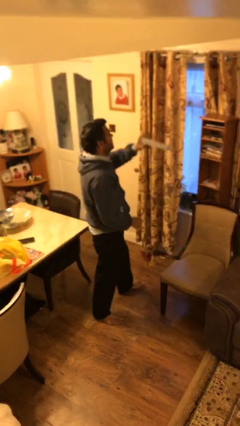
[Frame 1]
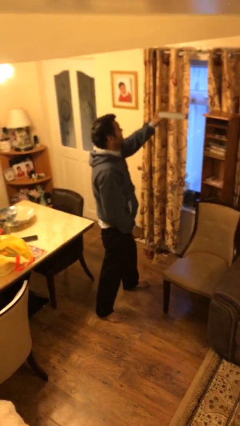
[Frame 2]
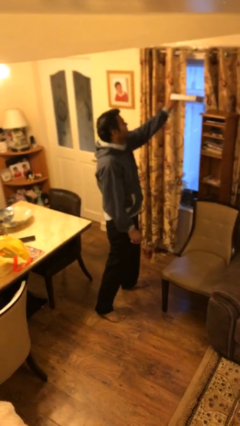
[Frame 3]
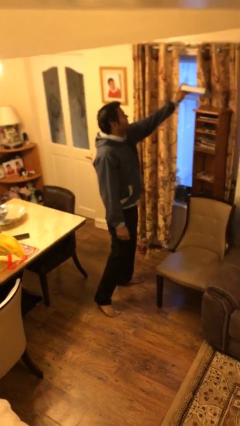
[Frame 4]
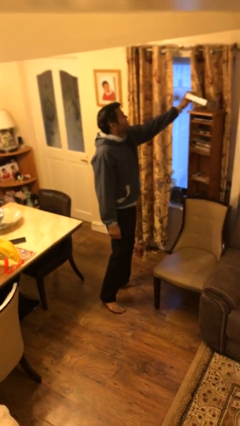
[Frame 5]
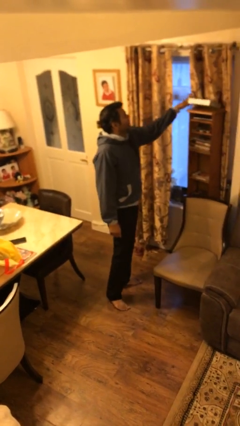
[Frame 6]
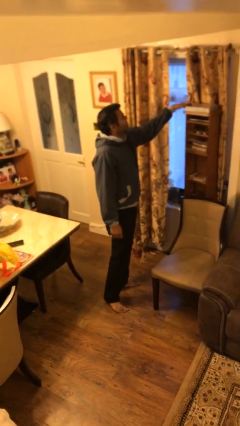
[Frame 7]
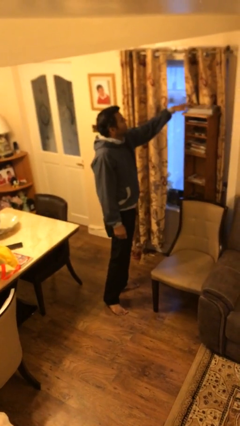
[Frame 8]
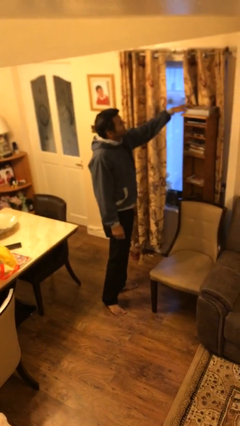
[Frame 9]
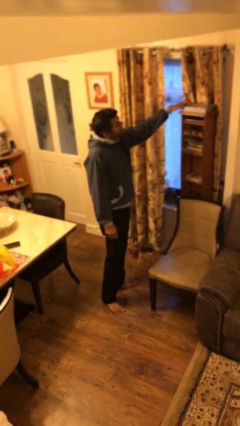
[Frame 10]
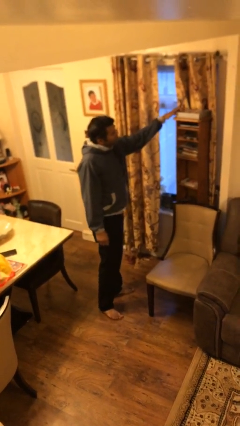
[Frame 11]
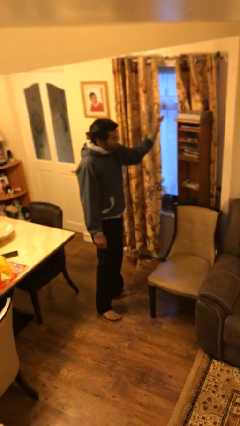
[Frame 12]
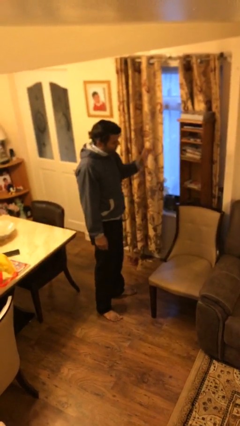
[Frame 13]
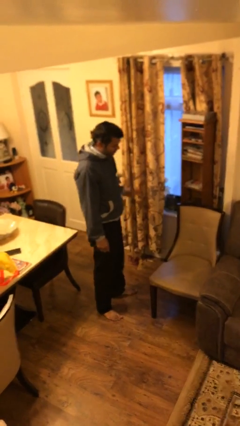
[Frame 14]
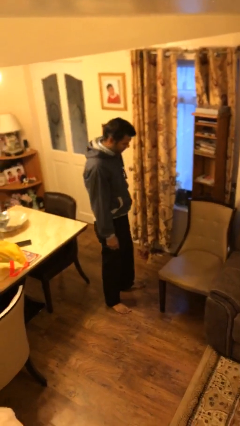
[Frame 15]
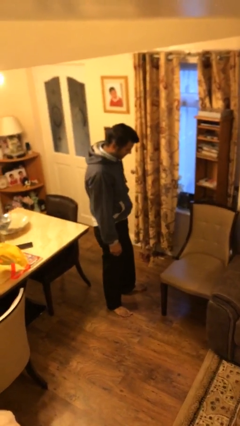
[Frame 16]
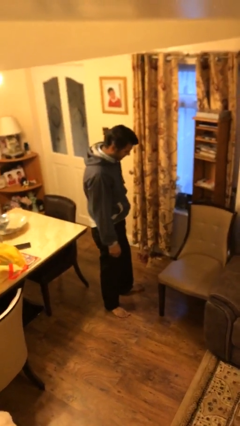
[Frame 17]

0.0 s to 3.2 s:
person puts down object on shelf

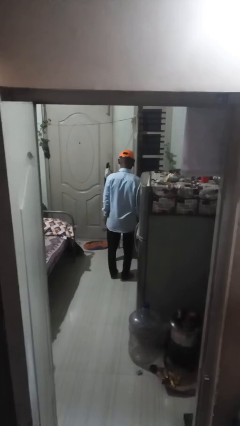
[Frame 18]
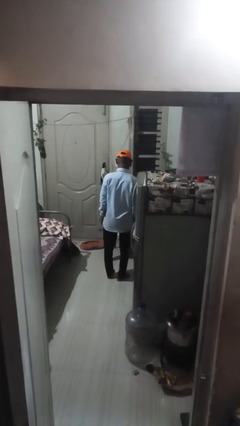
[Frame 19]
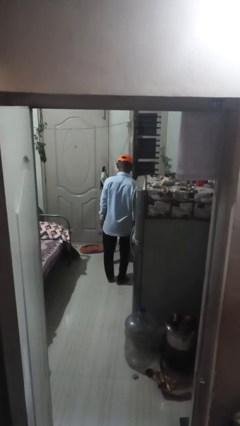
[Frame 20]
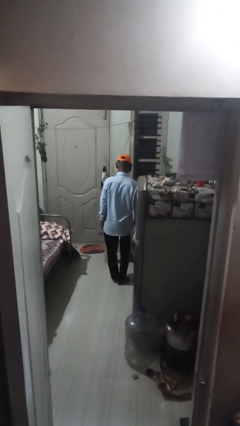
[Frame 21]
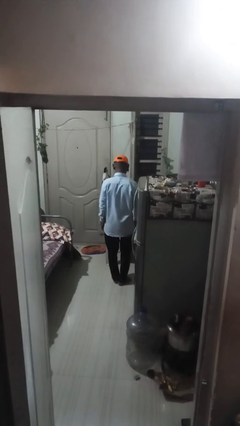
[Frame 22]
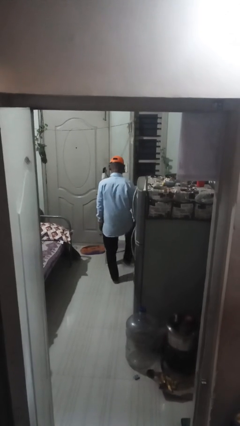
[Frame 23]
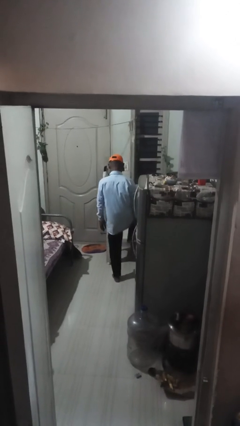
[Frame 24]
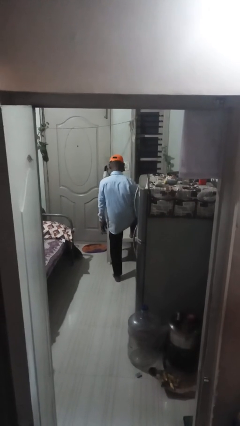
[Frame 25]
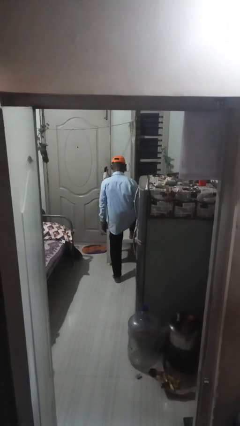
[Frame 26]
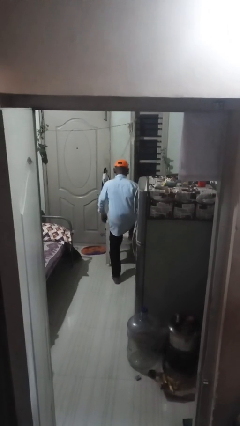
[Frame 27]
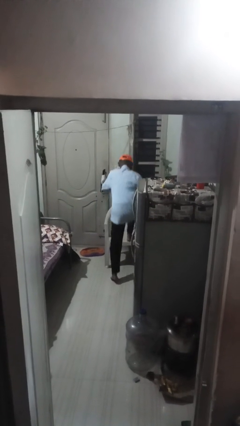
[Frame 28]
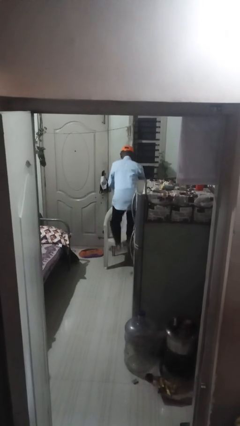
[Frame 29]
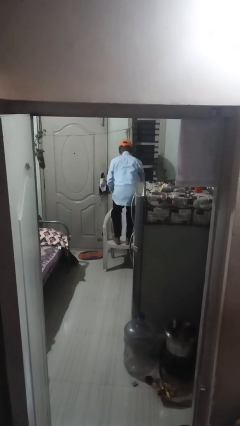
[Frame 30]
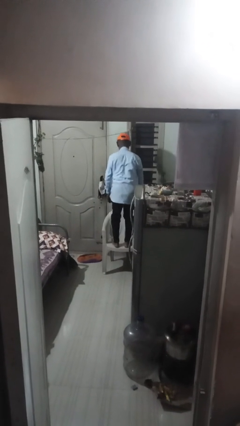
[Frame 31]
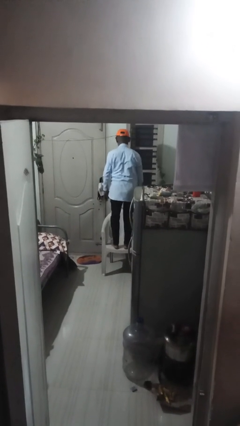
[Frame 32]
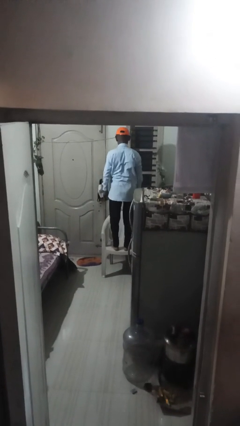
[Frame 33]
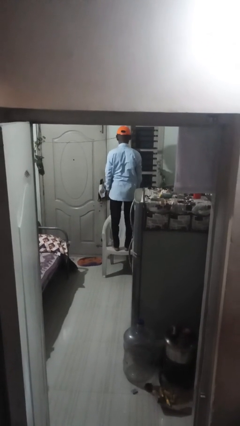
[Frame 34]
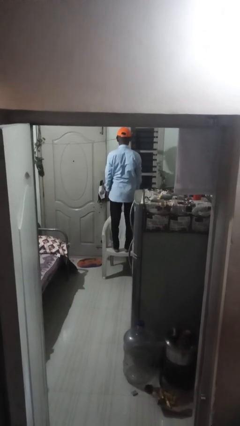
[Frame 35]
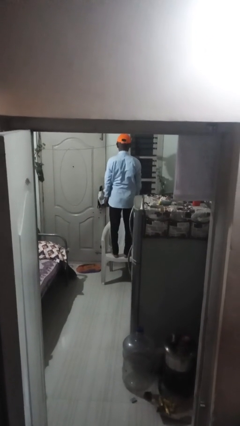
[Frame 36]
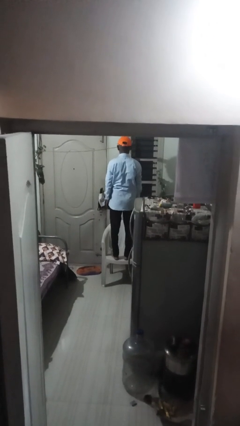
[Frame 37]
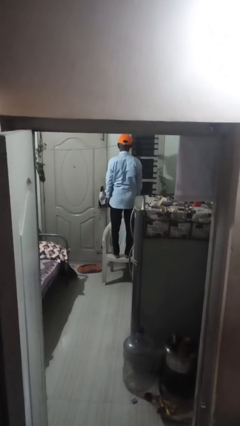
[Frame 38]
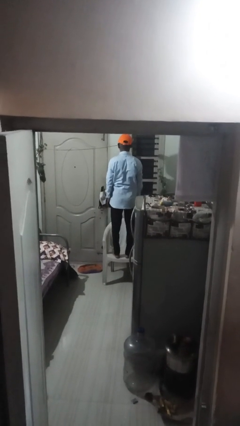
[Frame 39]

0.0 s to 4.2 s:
person climbs on chair

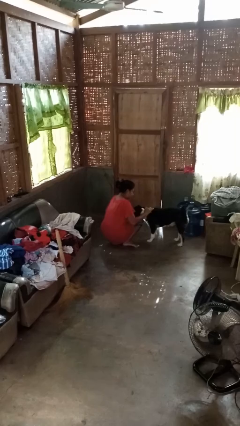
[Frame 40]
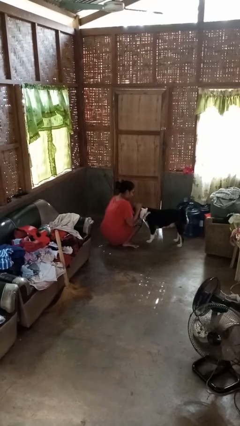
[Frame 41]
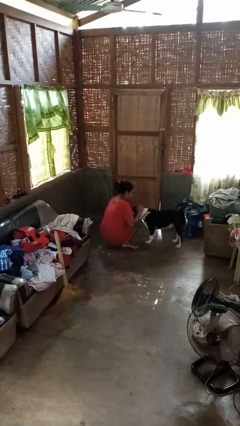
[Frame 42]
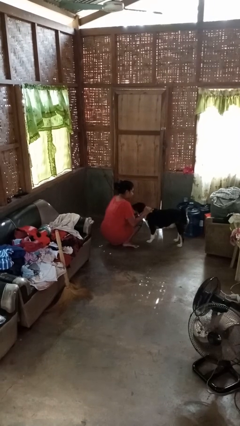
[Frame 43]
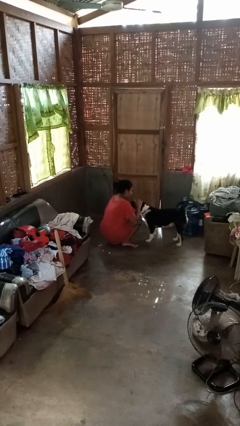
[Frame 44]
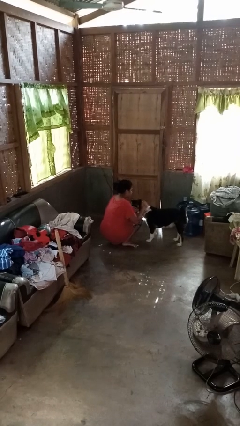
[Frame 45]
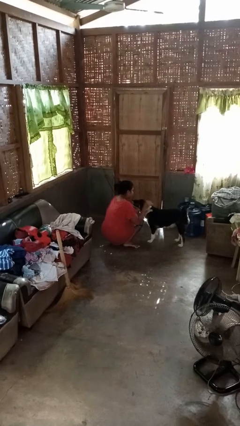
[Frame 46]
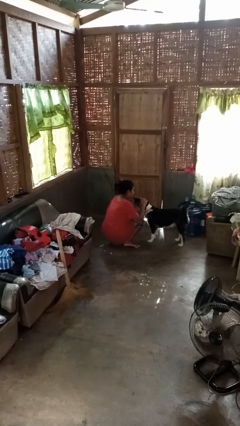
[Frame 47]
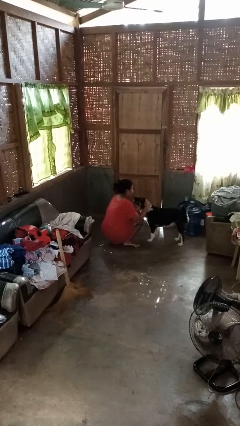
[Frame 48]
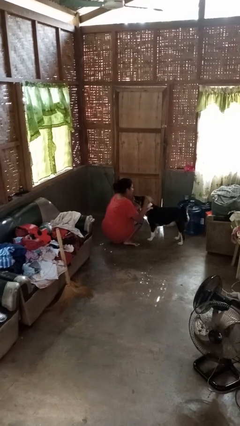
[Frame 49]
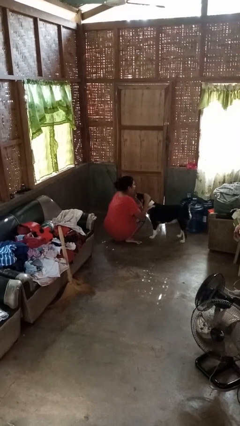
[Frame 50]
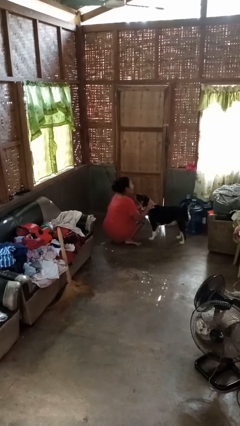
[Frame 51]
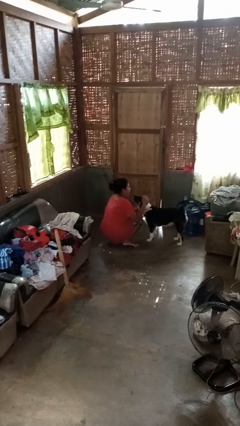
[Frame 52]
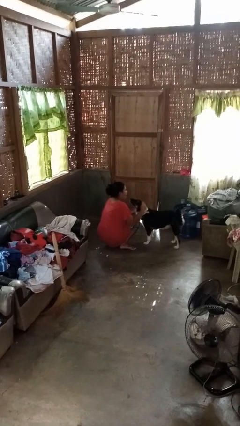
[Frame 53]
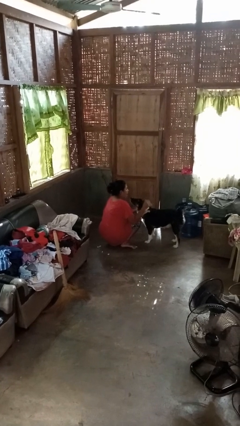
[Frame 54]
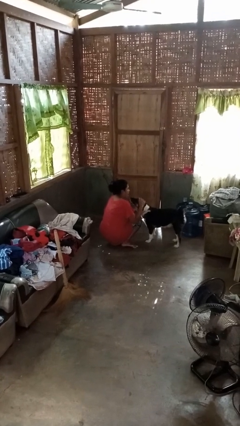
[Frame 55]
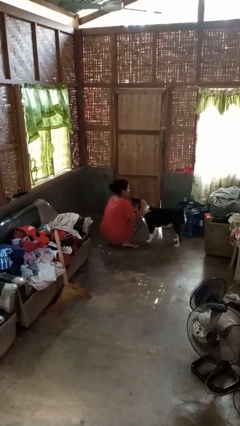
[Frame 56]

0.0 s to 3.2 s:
person pets dog

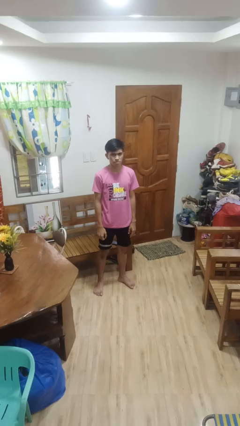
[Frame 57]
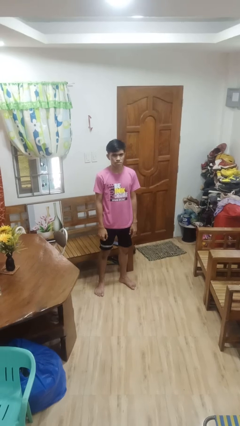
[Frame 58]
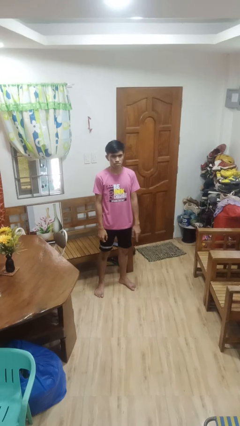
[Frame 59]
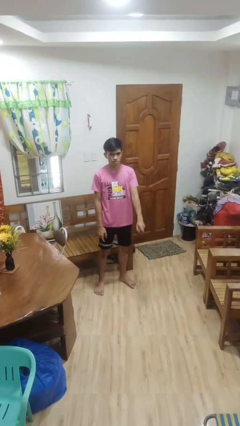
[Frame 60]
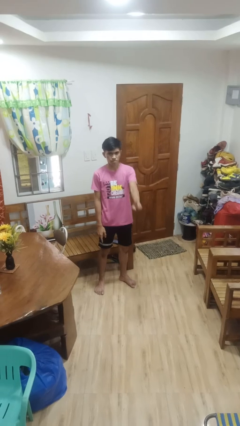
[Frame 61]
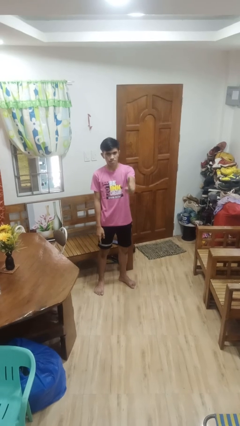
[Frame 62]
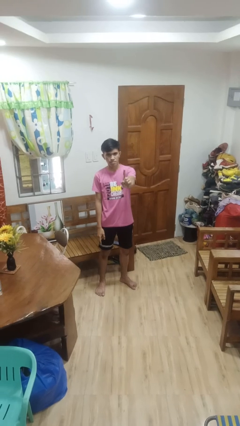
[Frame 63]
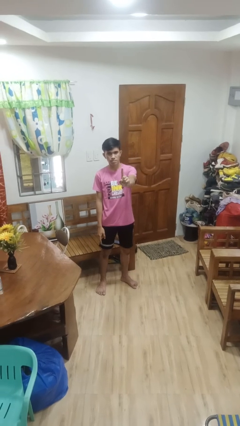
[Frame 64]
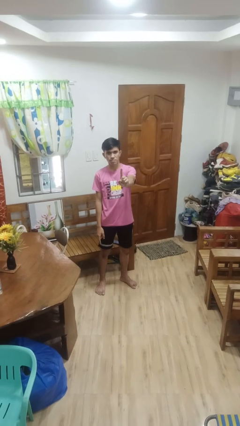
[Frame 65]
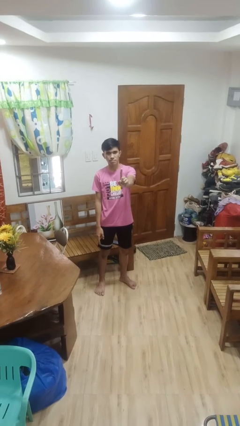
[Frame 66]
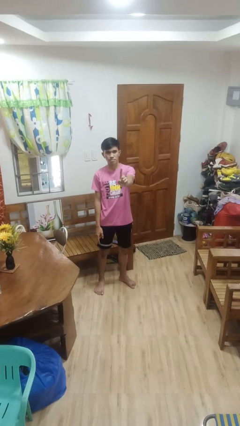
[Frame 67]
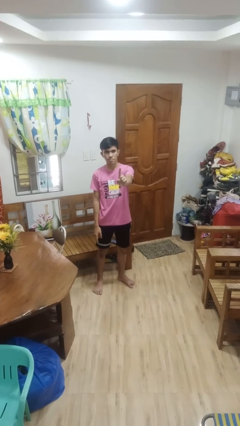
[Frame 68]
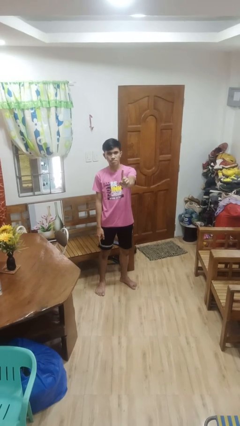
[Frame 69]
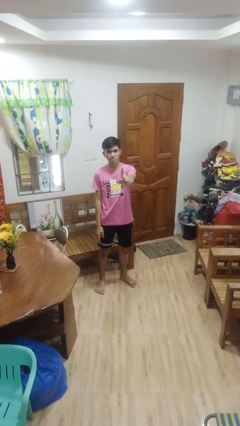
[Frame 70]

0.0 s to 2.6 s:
person gestures number one

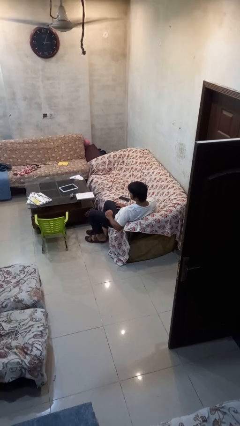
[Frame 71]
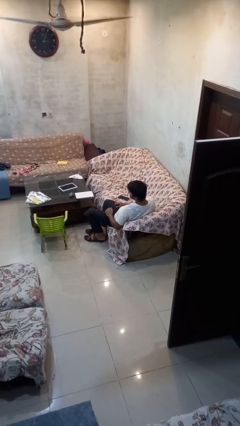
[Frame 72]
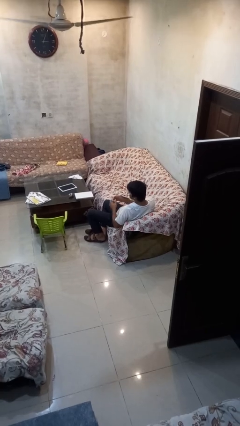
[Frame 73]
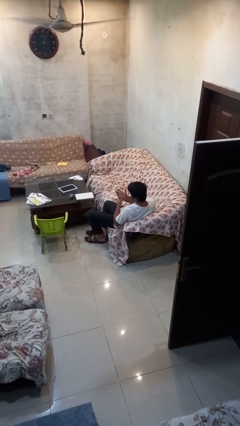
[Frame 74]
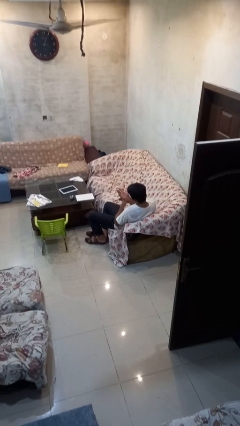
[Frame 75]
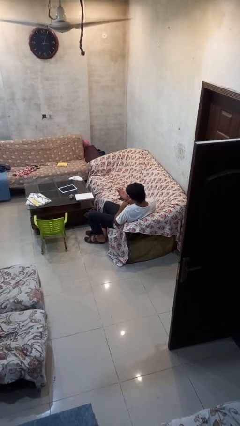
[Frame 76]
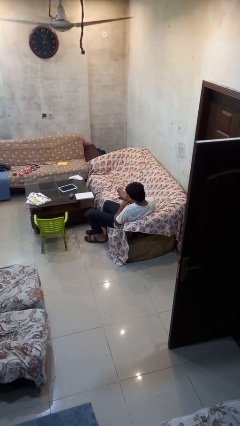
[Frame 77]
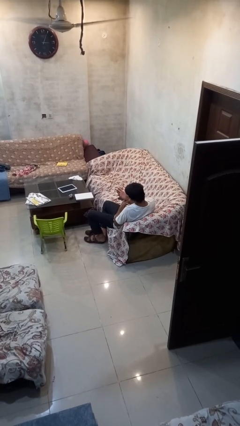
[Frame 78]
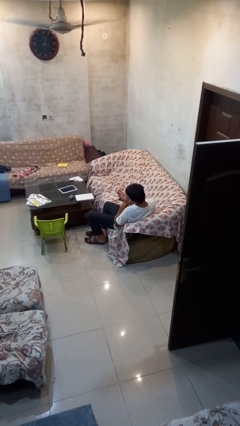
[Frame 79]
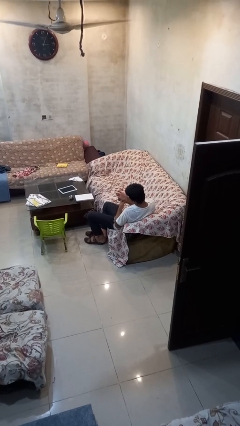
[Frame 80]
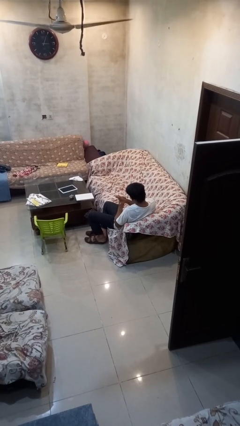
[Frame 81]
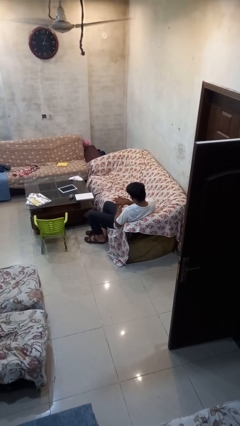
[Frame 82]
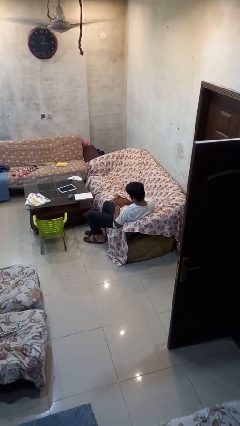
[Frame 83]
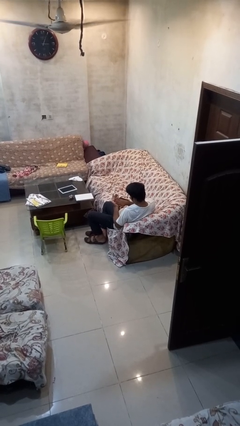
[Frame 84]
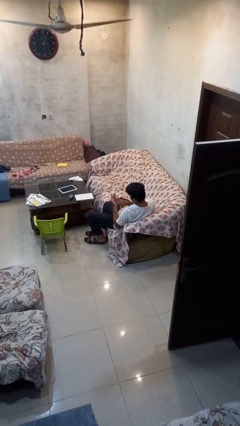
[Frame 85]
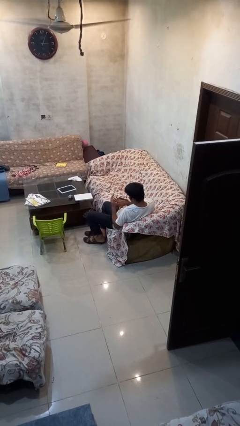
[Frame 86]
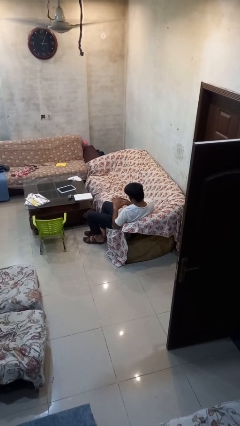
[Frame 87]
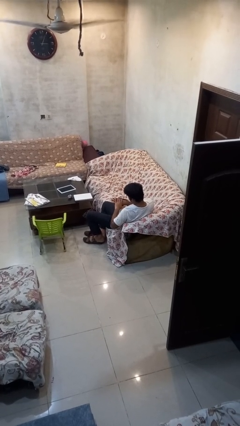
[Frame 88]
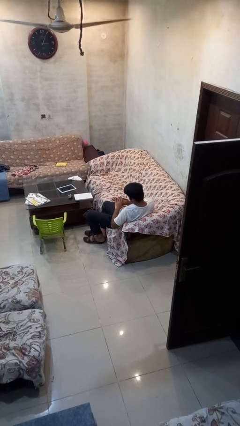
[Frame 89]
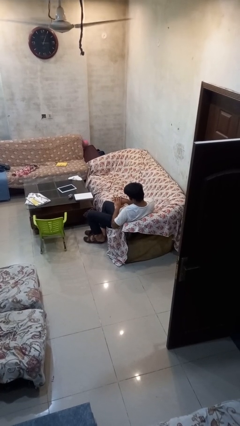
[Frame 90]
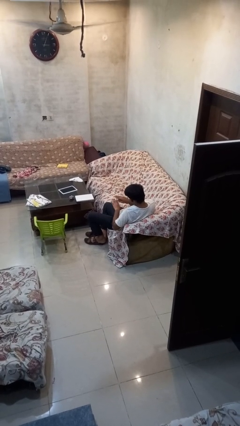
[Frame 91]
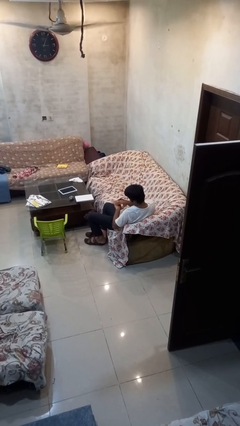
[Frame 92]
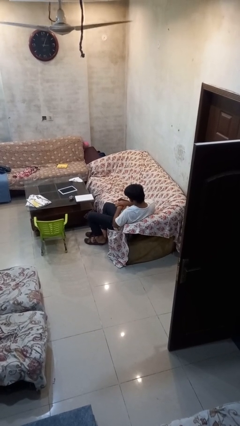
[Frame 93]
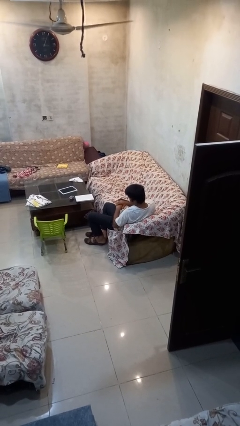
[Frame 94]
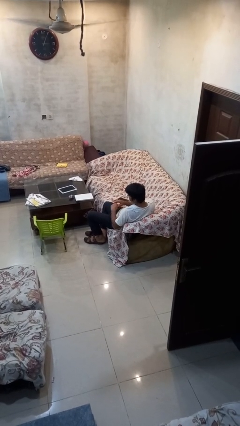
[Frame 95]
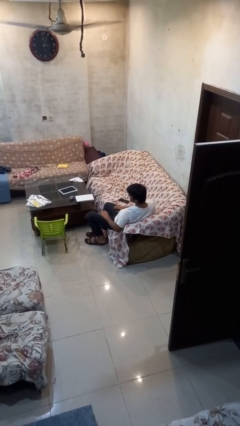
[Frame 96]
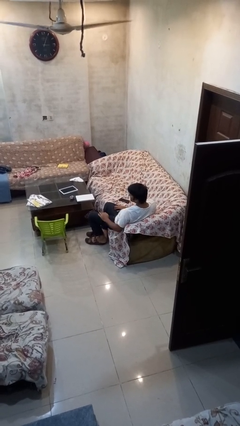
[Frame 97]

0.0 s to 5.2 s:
person looks at hands in lap
